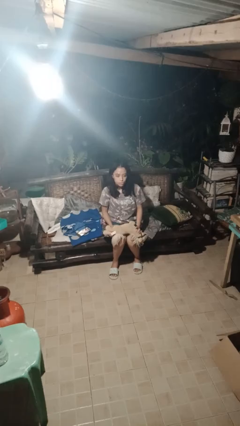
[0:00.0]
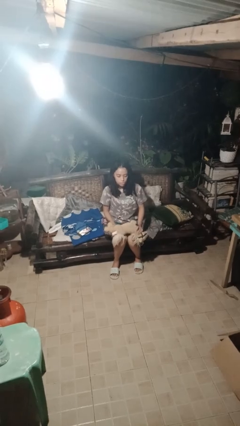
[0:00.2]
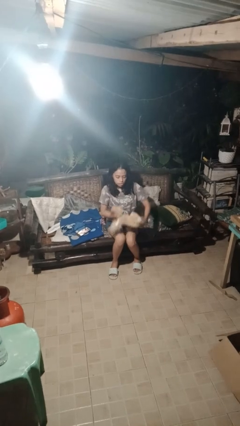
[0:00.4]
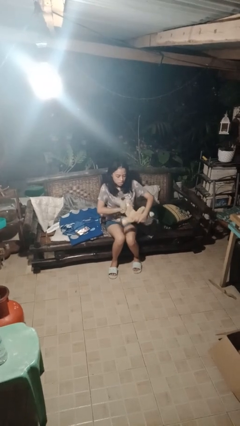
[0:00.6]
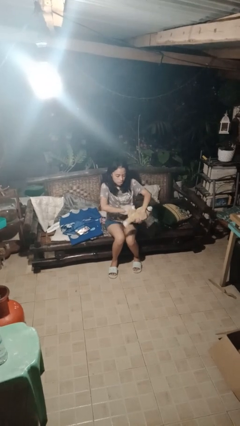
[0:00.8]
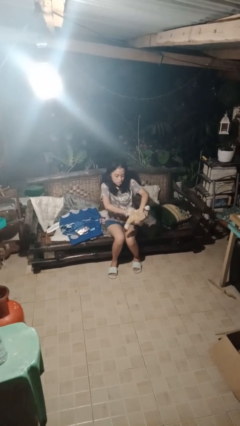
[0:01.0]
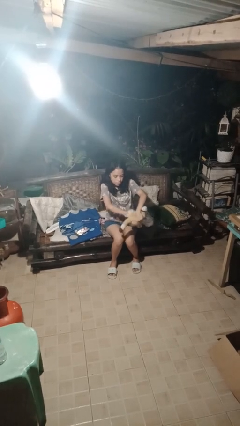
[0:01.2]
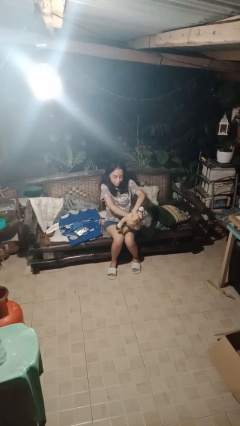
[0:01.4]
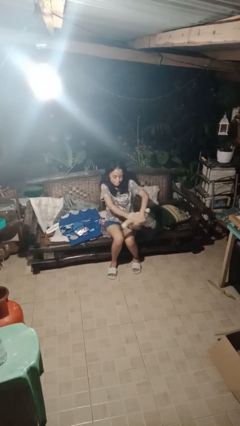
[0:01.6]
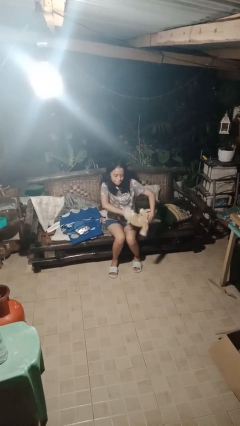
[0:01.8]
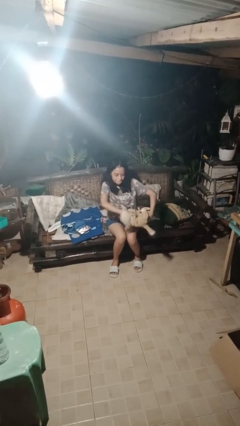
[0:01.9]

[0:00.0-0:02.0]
person squeezes object

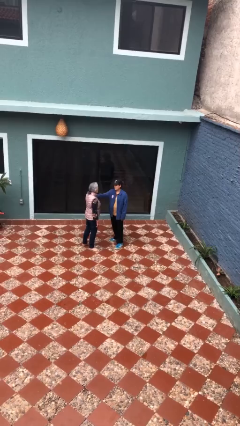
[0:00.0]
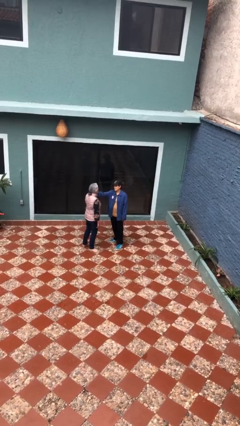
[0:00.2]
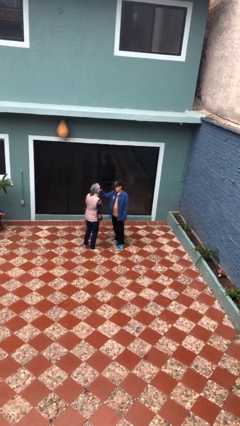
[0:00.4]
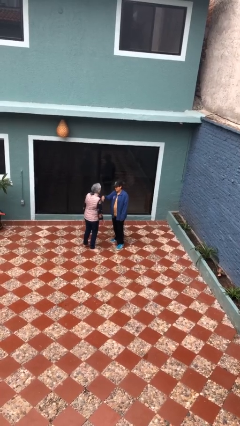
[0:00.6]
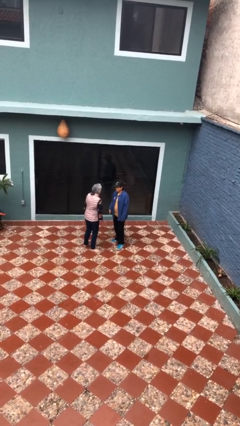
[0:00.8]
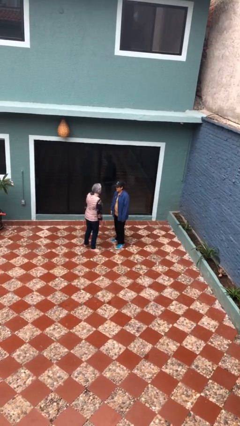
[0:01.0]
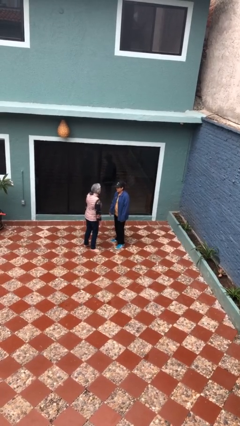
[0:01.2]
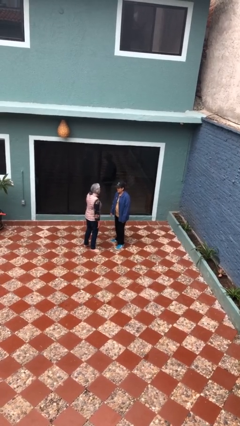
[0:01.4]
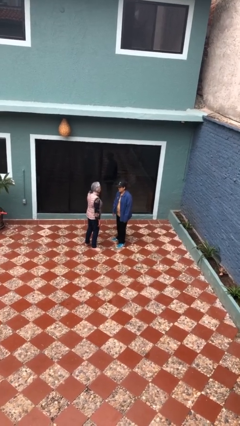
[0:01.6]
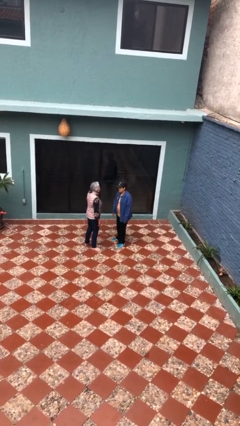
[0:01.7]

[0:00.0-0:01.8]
person shoves person

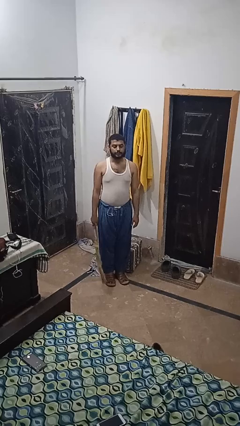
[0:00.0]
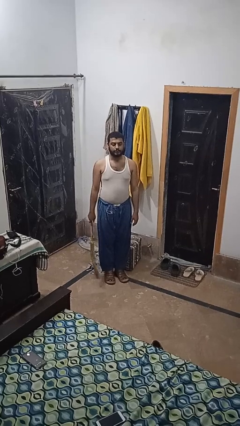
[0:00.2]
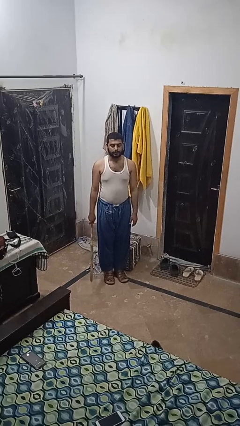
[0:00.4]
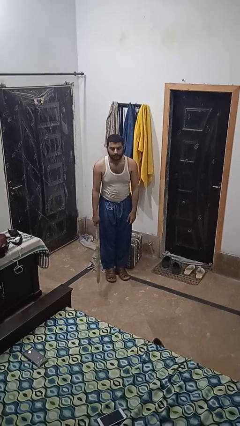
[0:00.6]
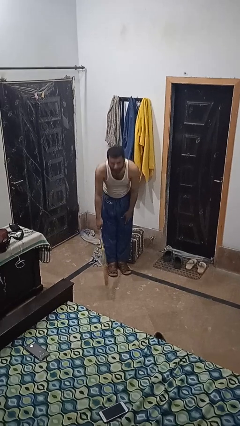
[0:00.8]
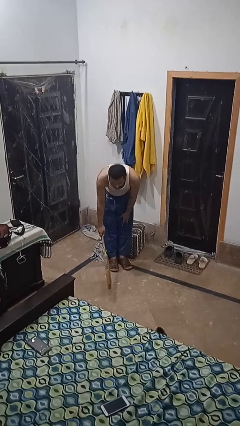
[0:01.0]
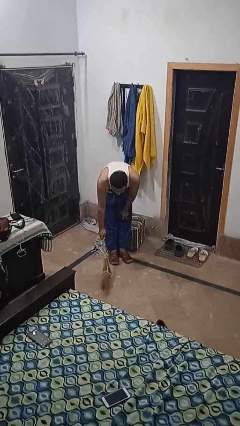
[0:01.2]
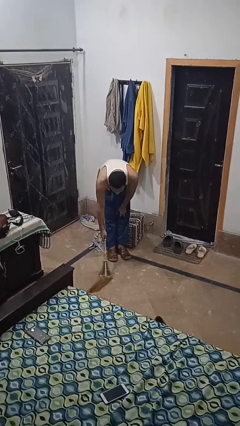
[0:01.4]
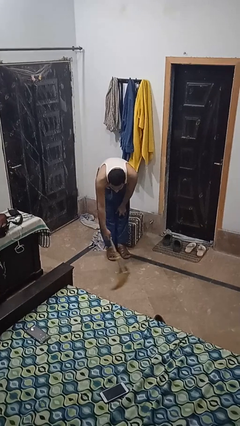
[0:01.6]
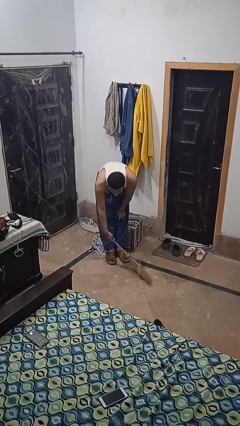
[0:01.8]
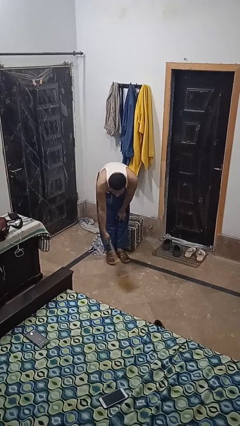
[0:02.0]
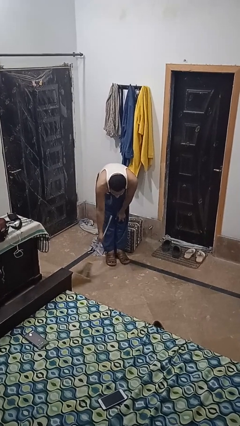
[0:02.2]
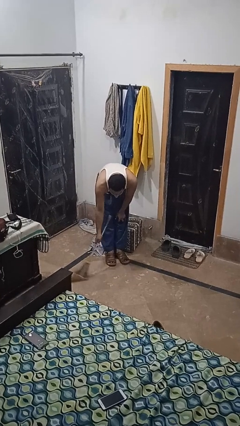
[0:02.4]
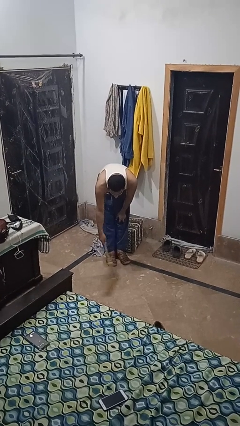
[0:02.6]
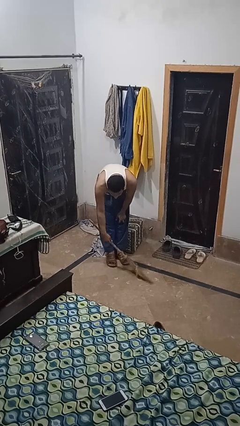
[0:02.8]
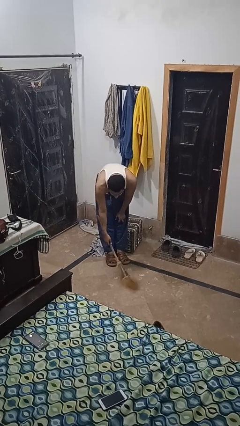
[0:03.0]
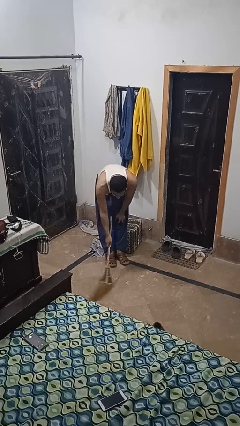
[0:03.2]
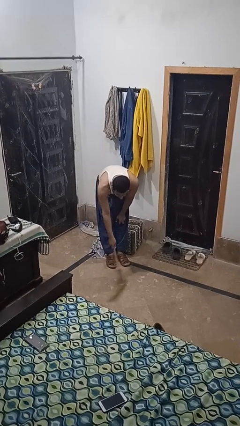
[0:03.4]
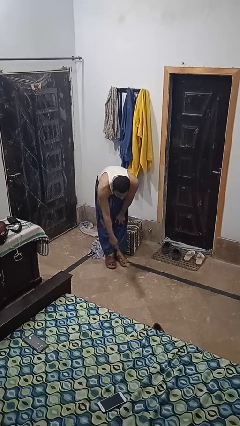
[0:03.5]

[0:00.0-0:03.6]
person sweeps floor

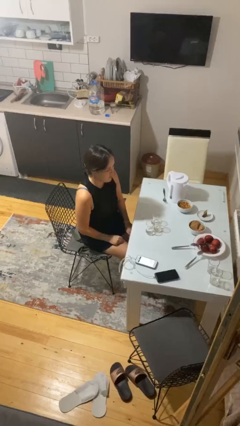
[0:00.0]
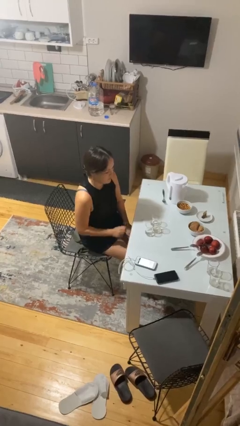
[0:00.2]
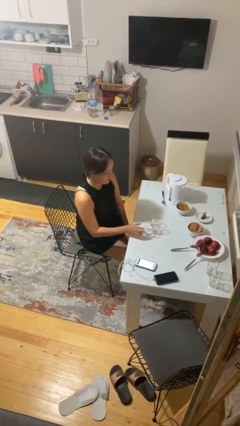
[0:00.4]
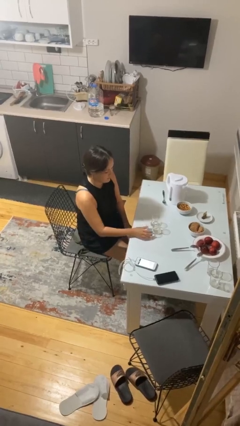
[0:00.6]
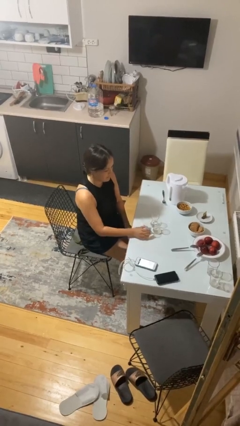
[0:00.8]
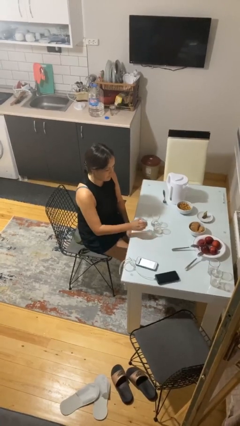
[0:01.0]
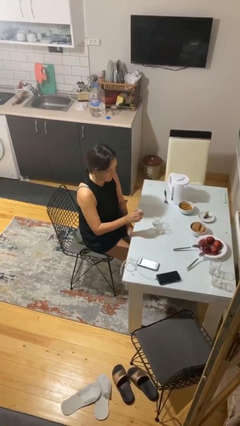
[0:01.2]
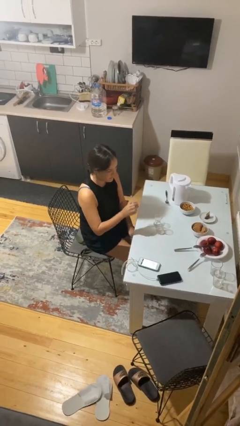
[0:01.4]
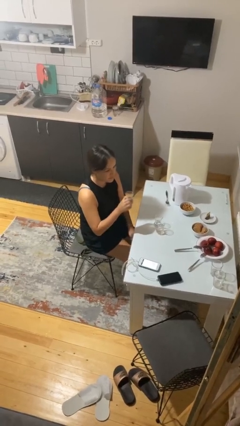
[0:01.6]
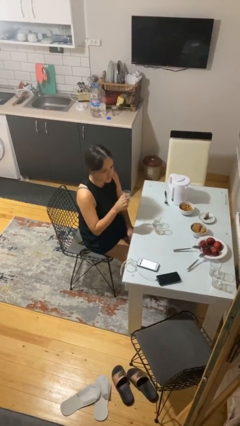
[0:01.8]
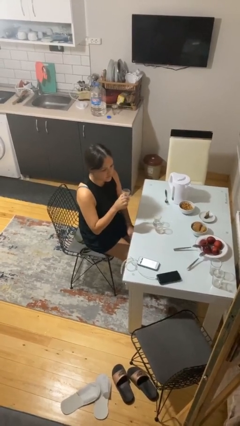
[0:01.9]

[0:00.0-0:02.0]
person picks up object from table

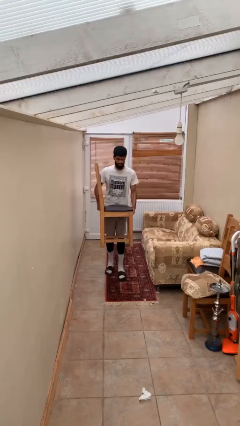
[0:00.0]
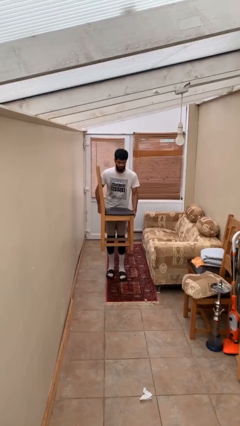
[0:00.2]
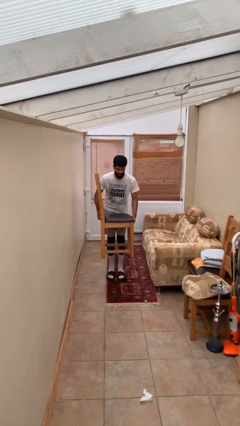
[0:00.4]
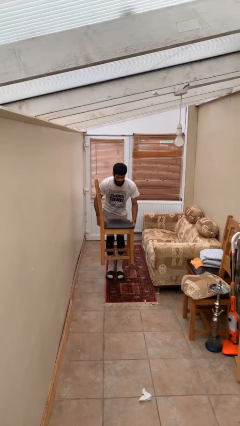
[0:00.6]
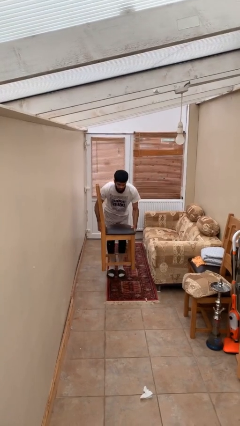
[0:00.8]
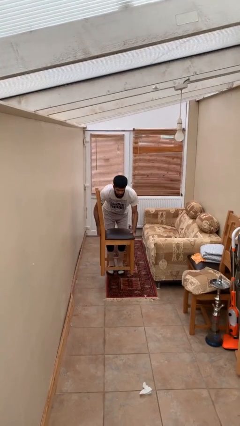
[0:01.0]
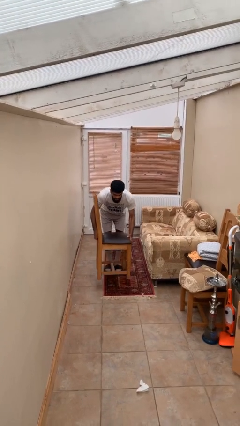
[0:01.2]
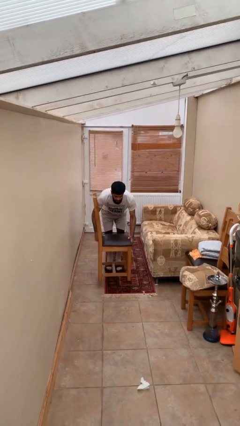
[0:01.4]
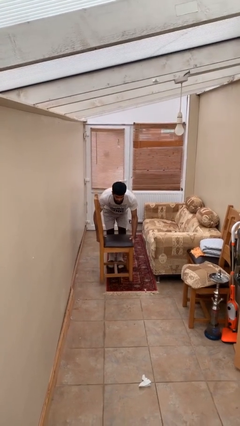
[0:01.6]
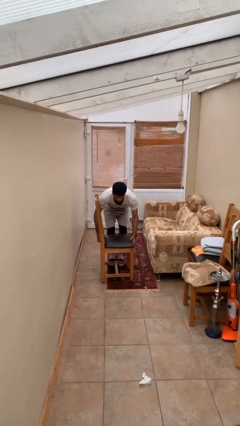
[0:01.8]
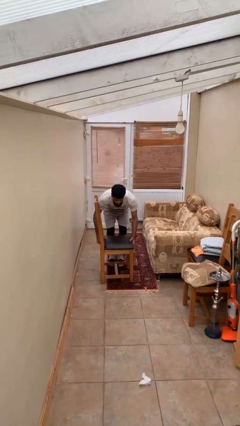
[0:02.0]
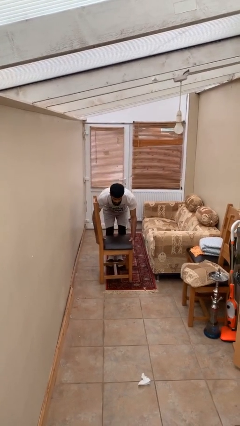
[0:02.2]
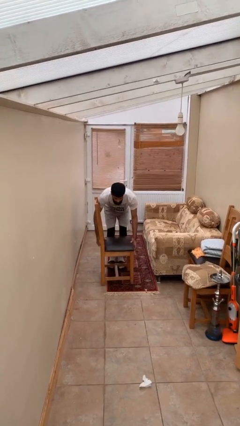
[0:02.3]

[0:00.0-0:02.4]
person puts down object on floor

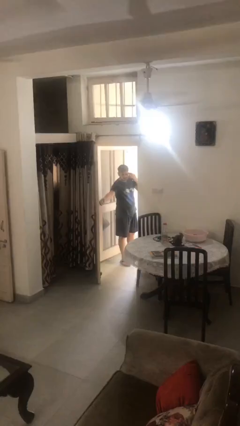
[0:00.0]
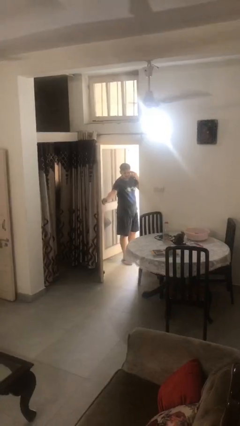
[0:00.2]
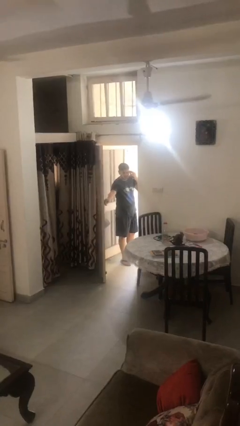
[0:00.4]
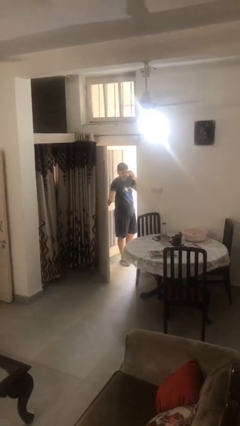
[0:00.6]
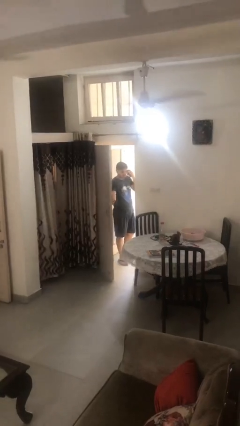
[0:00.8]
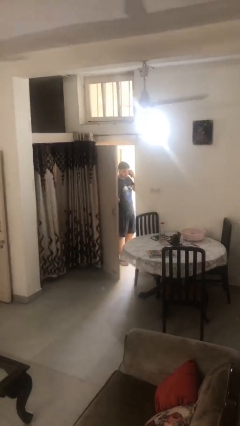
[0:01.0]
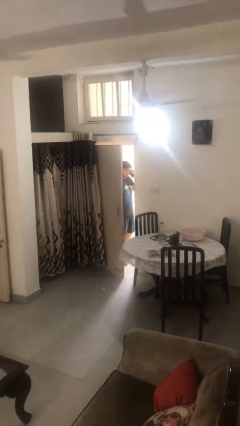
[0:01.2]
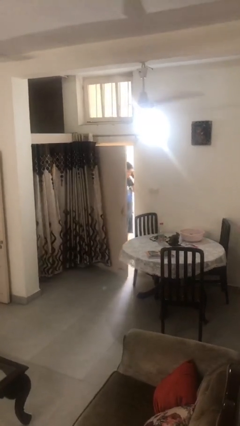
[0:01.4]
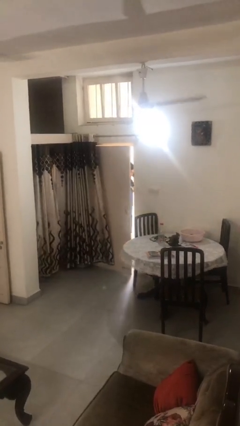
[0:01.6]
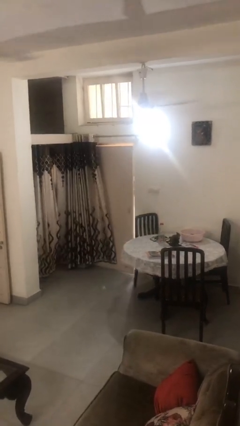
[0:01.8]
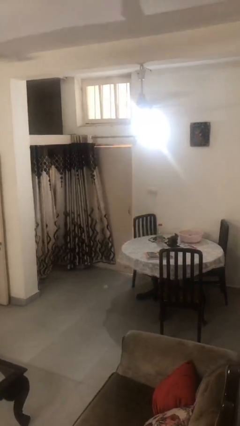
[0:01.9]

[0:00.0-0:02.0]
person closes facility door

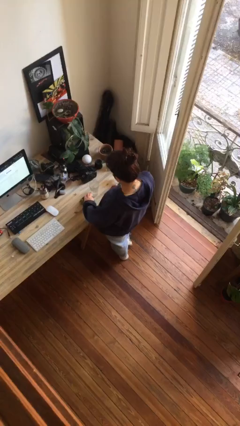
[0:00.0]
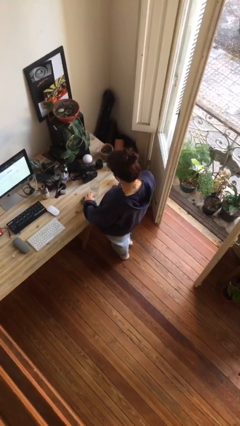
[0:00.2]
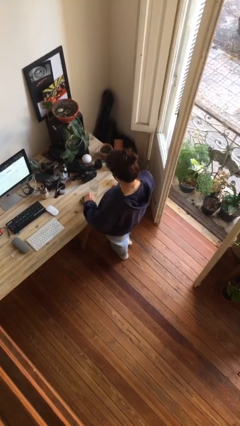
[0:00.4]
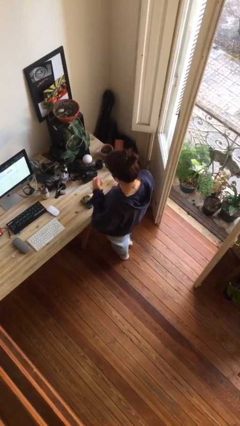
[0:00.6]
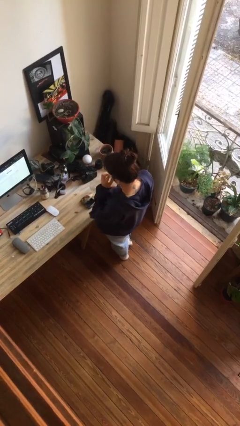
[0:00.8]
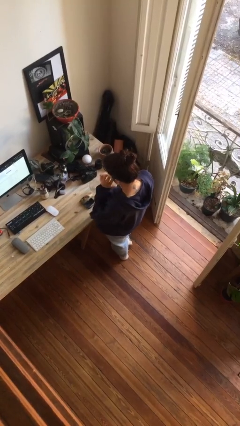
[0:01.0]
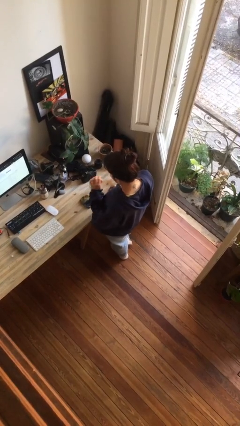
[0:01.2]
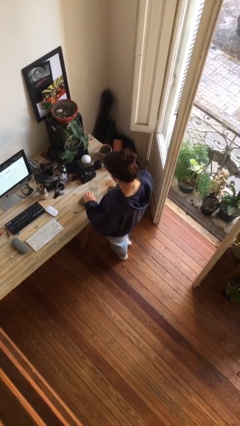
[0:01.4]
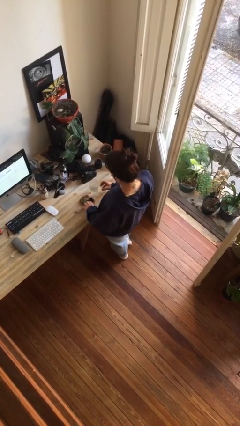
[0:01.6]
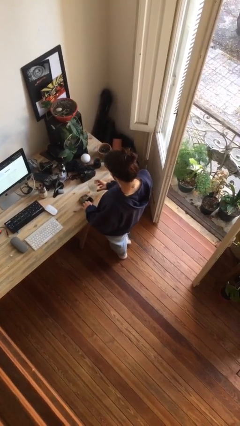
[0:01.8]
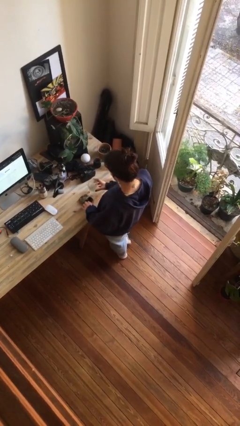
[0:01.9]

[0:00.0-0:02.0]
person takes medicine pills

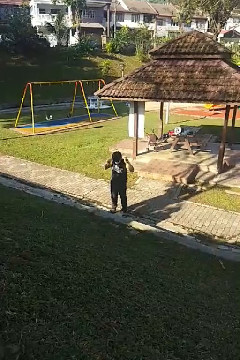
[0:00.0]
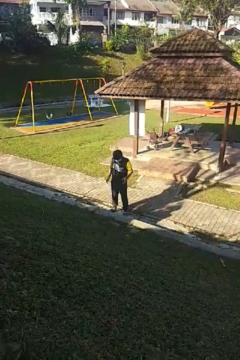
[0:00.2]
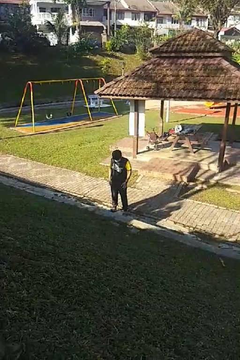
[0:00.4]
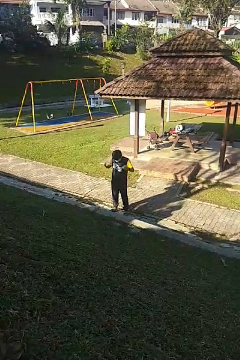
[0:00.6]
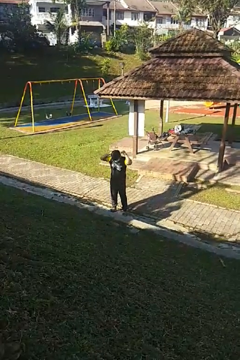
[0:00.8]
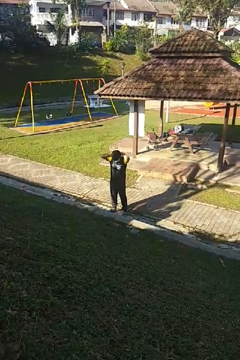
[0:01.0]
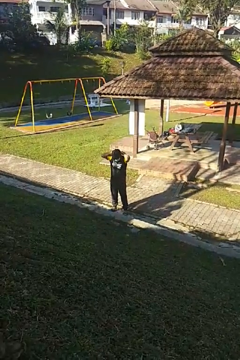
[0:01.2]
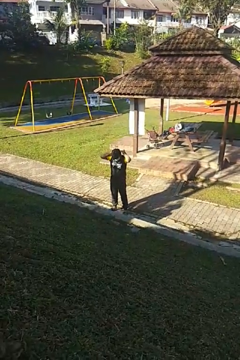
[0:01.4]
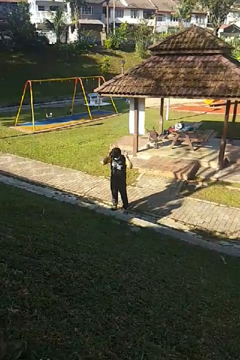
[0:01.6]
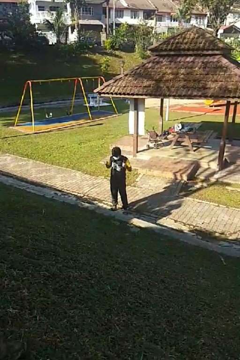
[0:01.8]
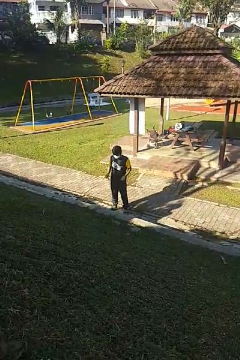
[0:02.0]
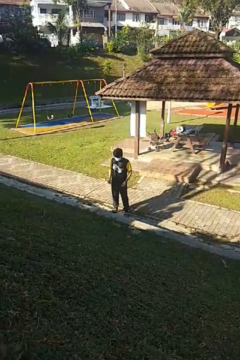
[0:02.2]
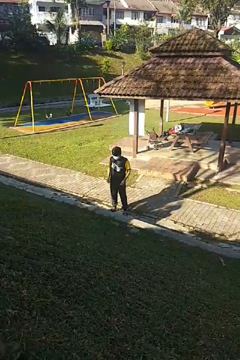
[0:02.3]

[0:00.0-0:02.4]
person takes off necklace
